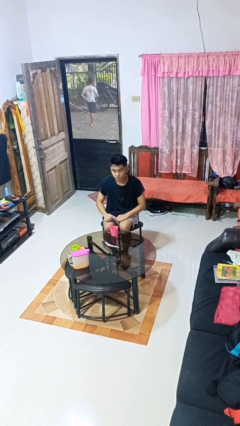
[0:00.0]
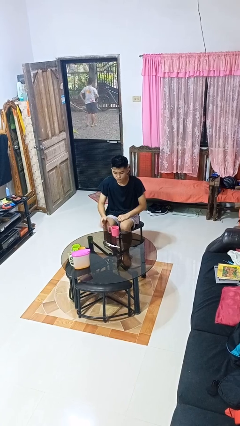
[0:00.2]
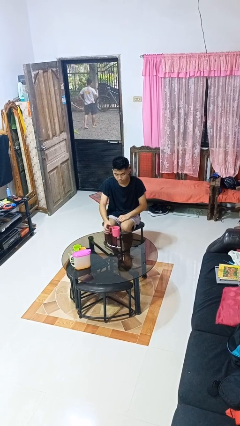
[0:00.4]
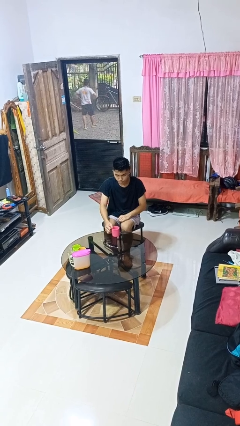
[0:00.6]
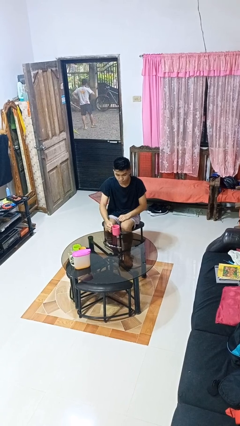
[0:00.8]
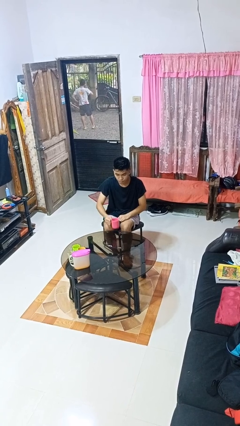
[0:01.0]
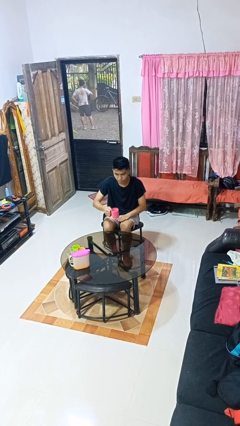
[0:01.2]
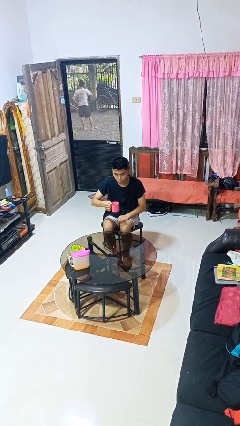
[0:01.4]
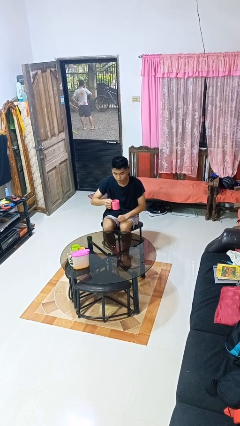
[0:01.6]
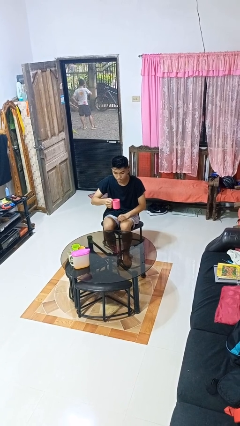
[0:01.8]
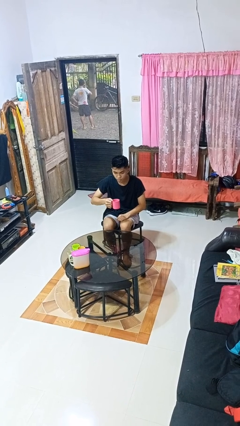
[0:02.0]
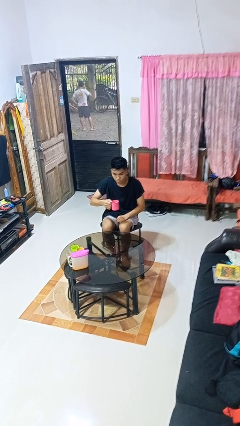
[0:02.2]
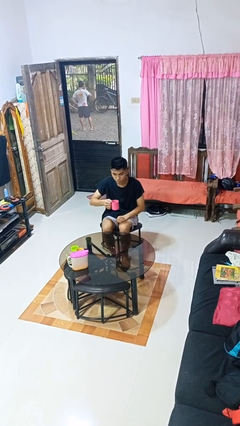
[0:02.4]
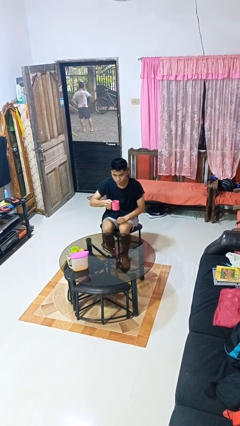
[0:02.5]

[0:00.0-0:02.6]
person picks up object from table

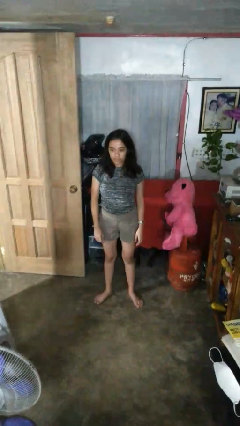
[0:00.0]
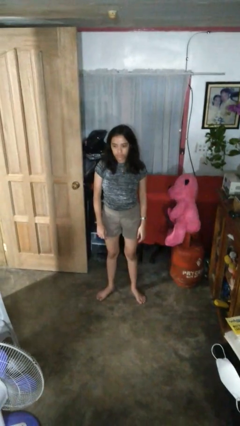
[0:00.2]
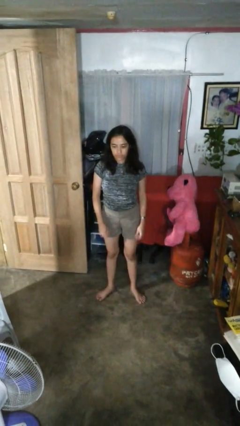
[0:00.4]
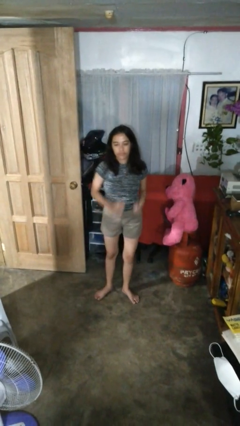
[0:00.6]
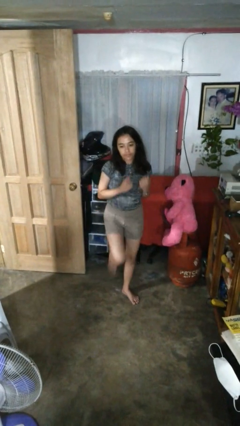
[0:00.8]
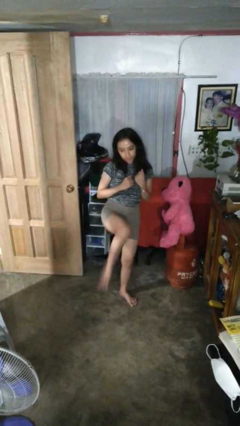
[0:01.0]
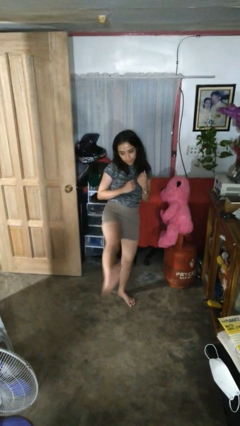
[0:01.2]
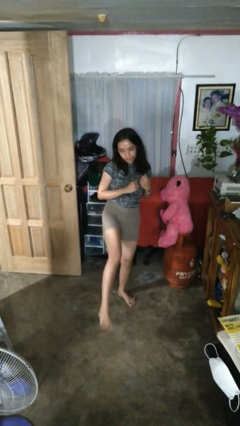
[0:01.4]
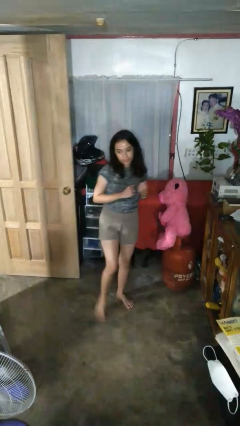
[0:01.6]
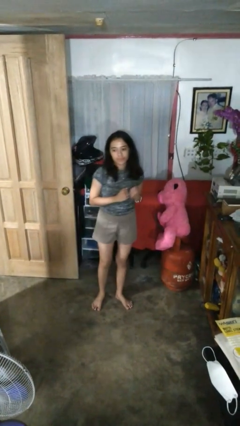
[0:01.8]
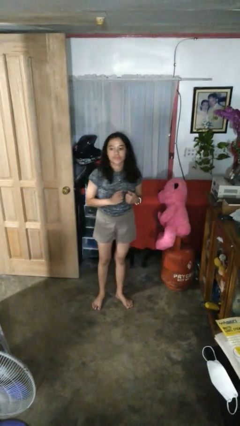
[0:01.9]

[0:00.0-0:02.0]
person karate kicks

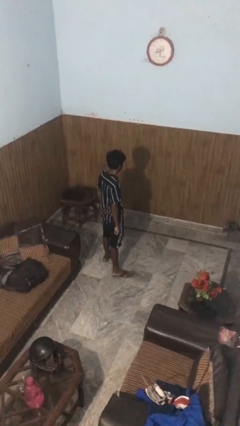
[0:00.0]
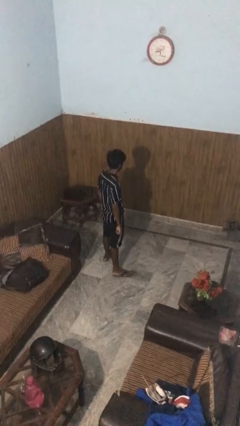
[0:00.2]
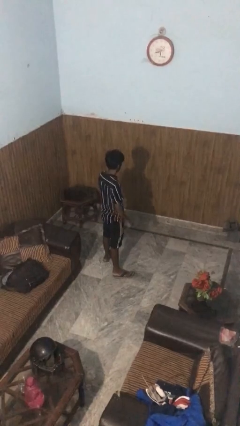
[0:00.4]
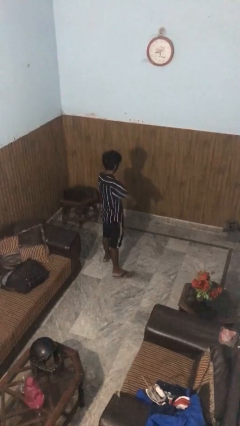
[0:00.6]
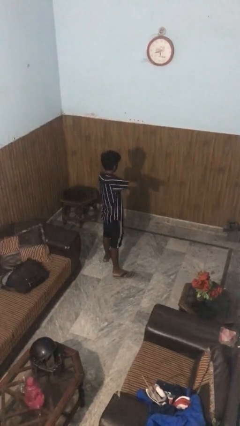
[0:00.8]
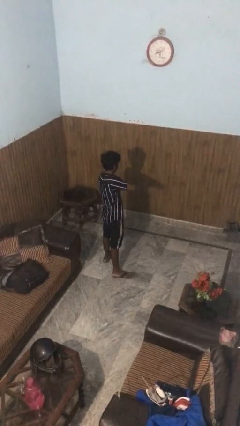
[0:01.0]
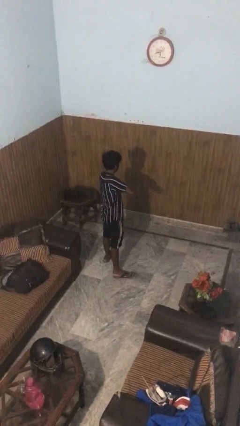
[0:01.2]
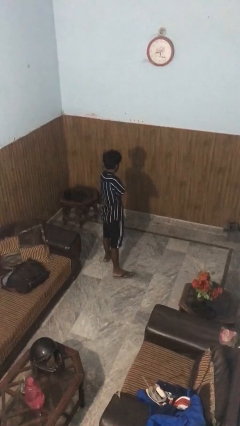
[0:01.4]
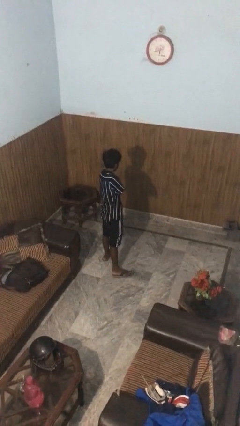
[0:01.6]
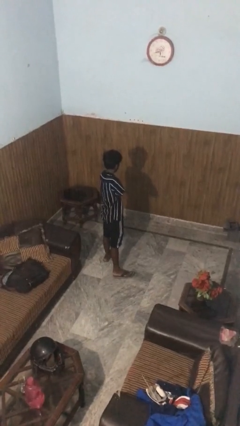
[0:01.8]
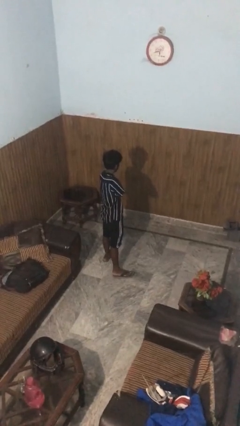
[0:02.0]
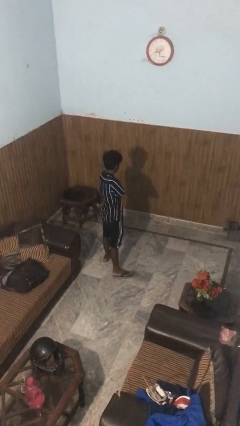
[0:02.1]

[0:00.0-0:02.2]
person crosses arms

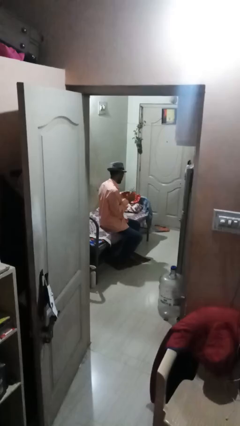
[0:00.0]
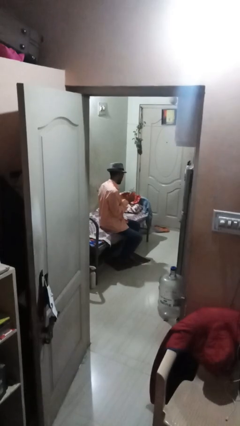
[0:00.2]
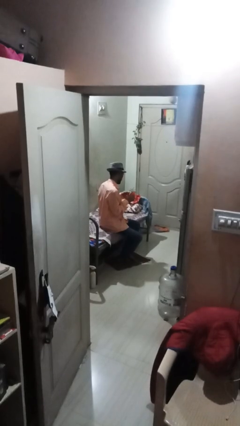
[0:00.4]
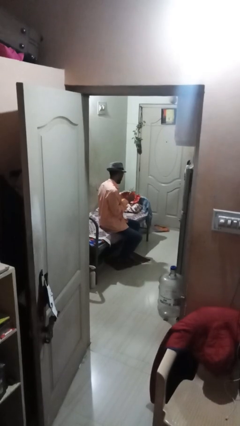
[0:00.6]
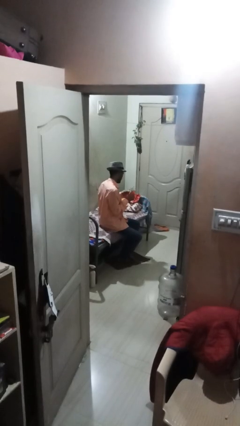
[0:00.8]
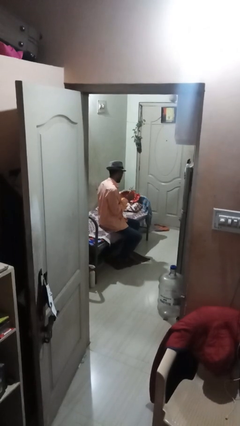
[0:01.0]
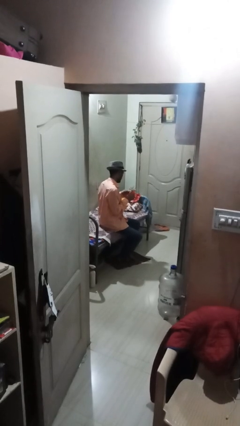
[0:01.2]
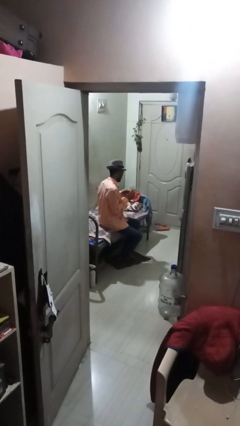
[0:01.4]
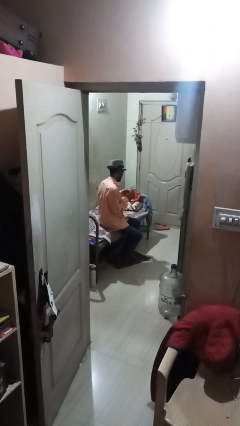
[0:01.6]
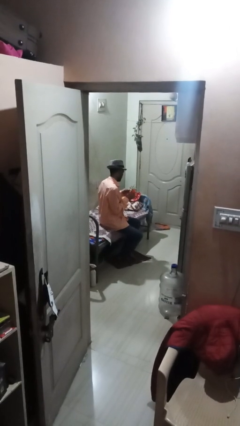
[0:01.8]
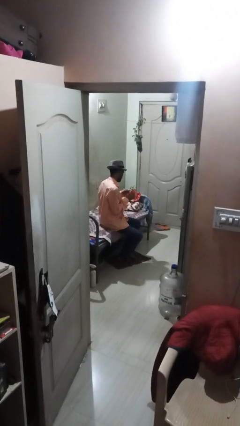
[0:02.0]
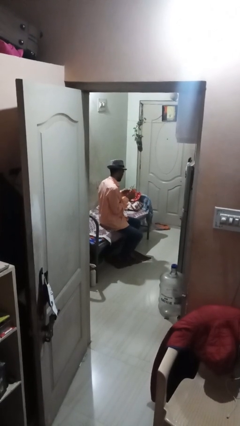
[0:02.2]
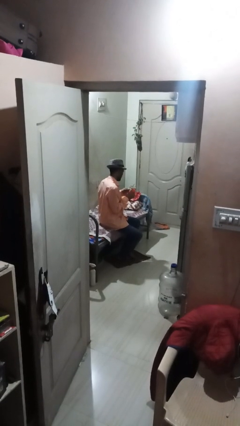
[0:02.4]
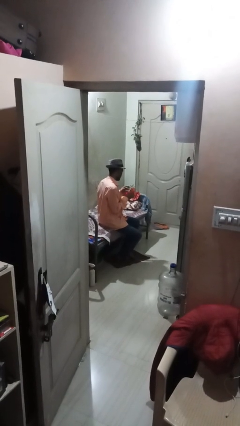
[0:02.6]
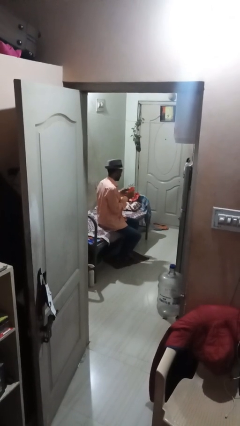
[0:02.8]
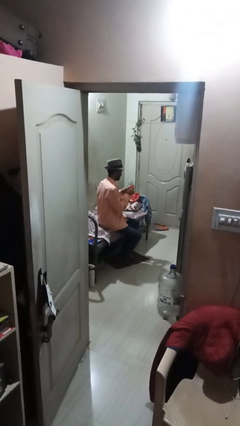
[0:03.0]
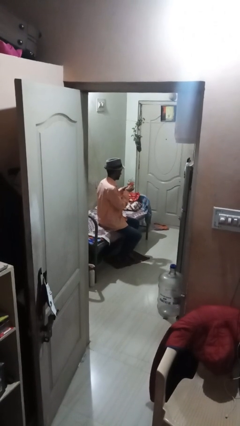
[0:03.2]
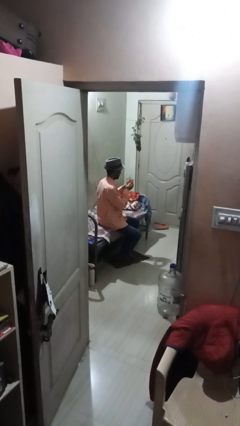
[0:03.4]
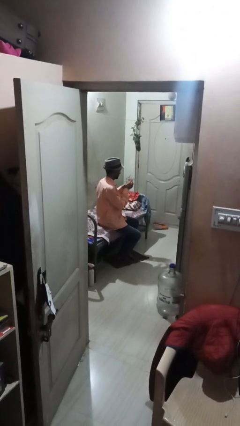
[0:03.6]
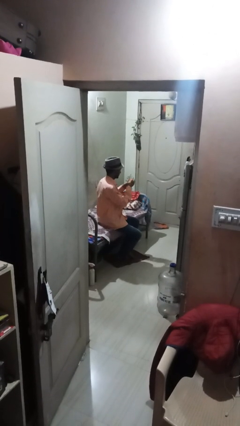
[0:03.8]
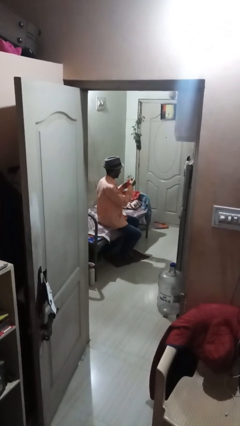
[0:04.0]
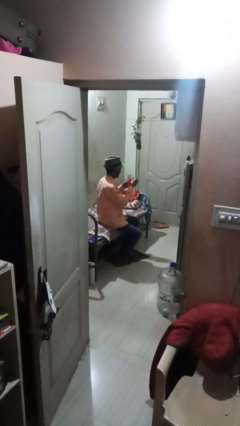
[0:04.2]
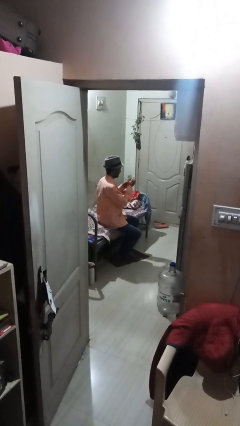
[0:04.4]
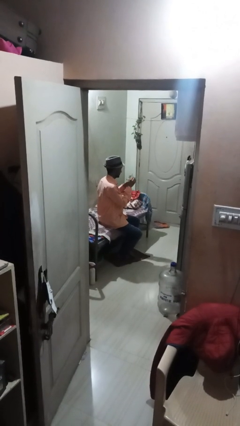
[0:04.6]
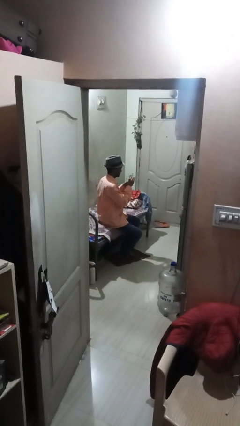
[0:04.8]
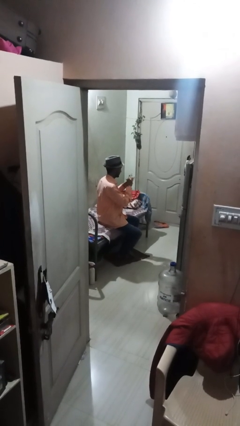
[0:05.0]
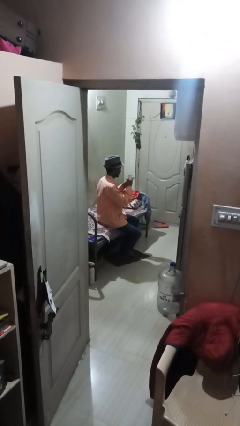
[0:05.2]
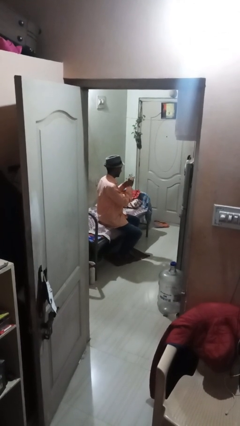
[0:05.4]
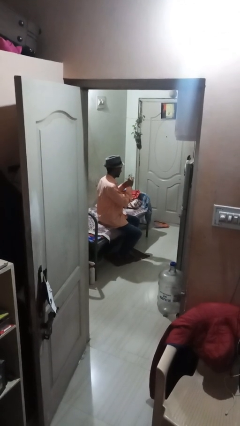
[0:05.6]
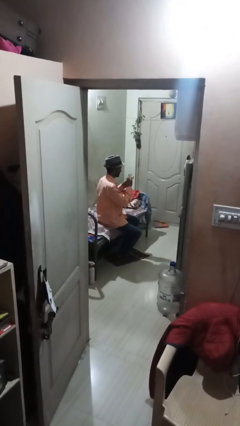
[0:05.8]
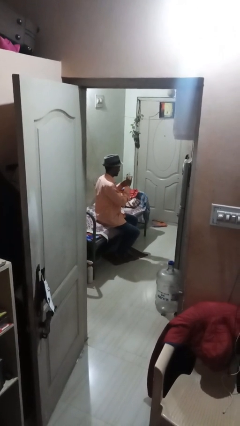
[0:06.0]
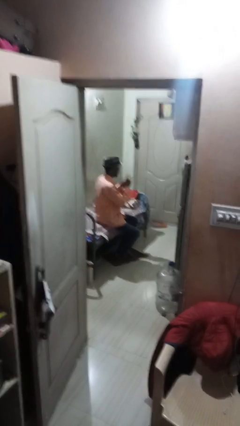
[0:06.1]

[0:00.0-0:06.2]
person arranges flowers in vase

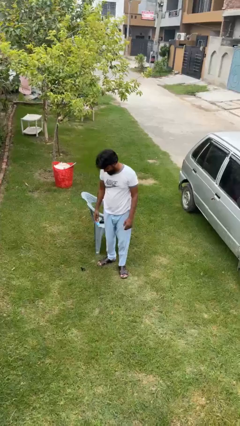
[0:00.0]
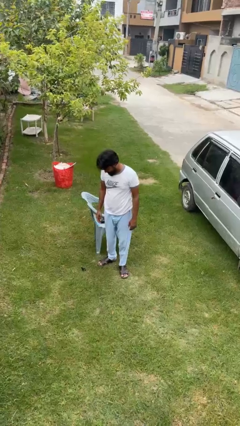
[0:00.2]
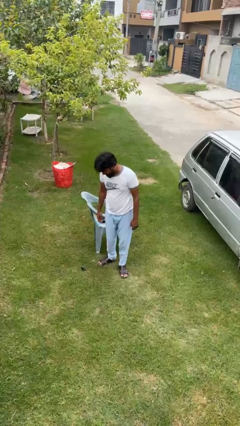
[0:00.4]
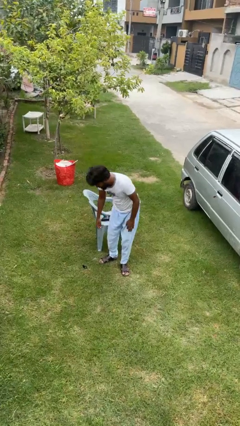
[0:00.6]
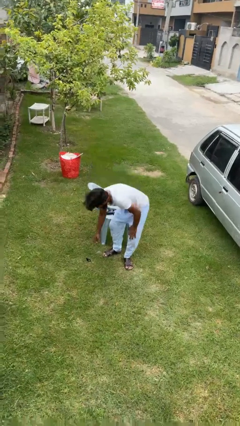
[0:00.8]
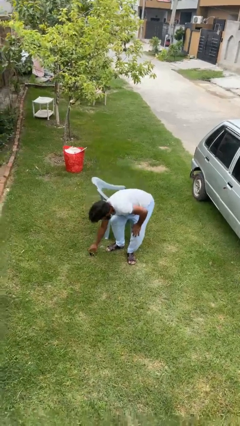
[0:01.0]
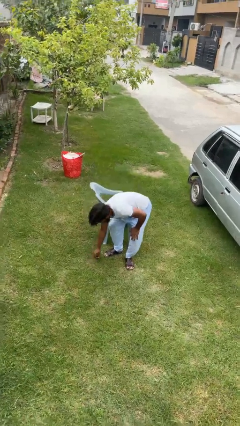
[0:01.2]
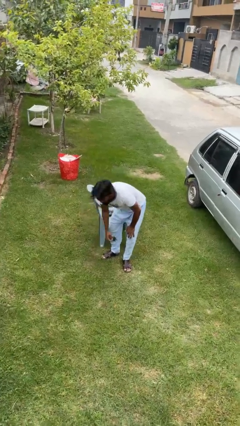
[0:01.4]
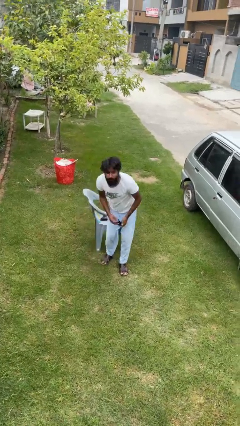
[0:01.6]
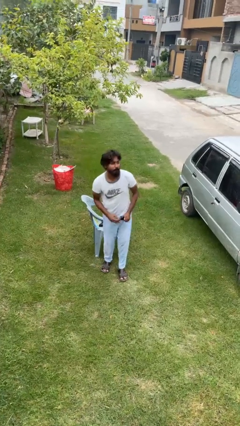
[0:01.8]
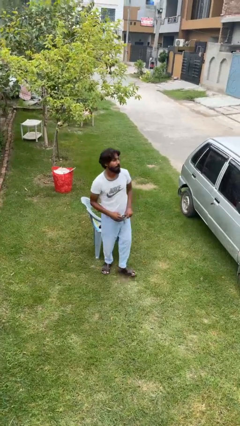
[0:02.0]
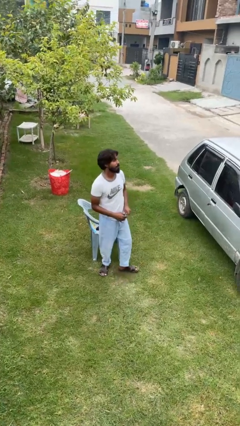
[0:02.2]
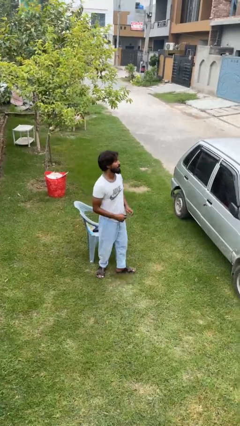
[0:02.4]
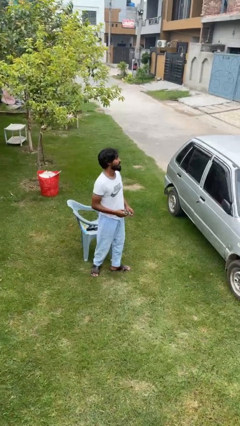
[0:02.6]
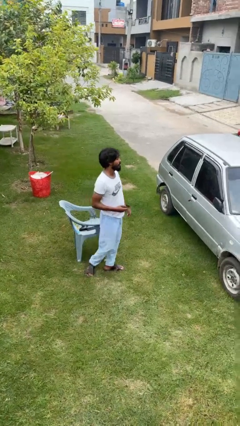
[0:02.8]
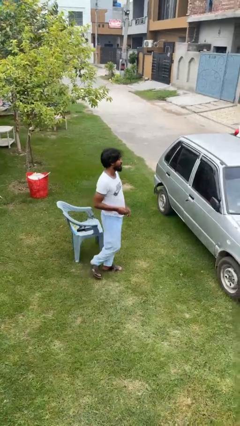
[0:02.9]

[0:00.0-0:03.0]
person picks up object from floor

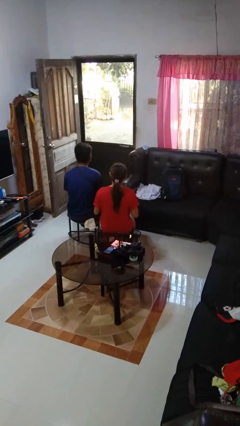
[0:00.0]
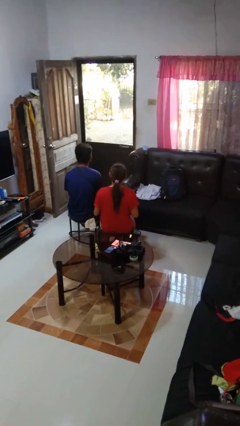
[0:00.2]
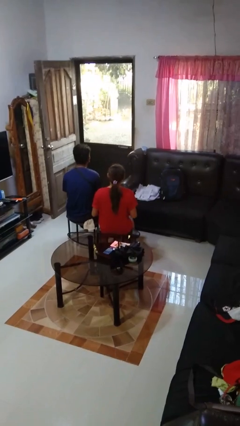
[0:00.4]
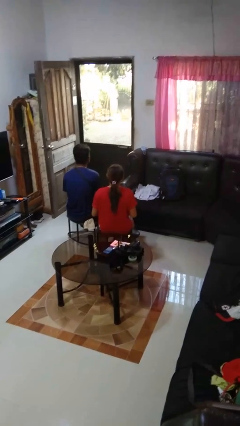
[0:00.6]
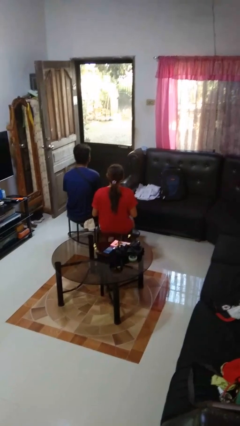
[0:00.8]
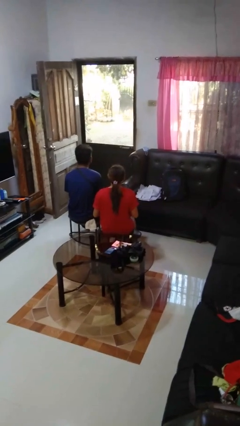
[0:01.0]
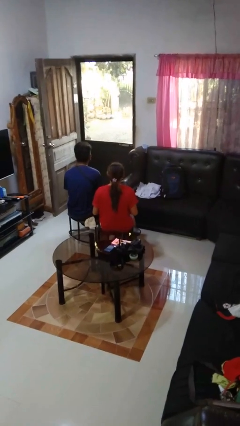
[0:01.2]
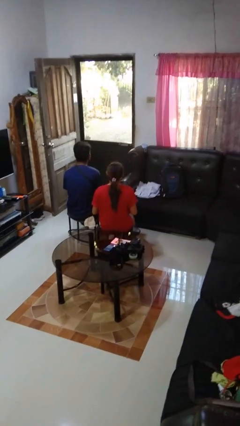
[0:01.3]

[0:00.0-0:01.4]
person hits person with pillow

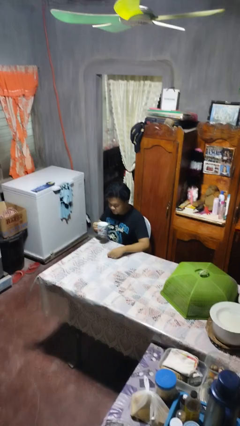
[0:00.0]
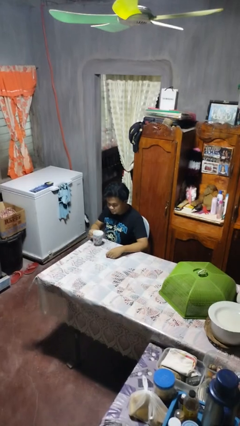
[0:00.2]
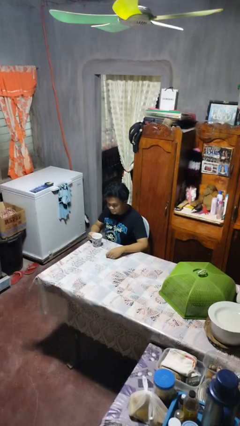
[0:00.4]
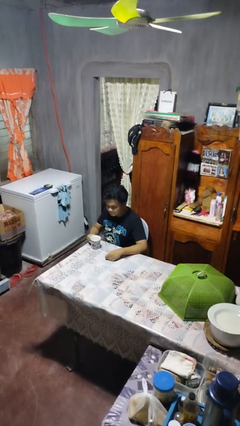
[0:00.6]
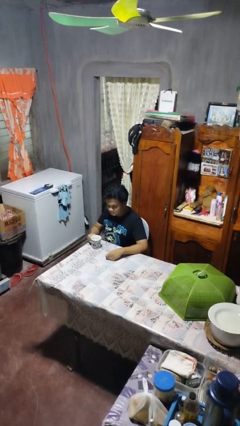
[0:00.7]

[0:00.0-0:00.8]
person puts down object on table
